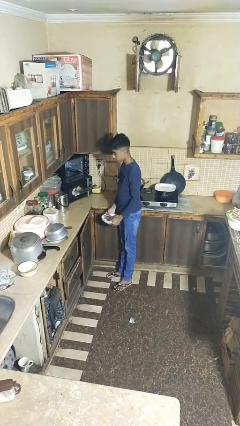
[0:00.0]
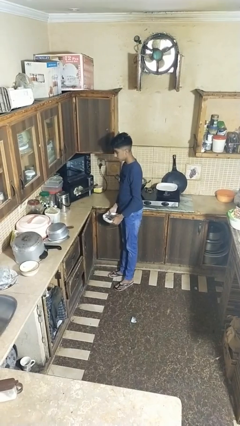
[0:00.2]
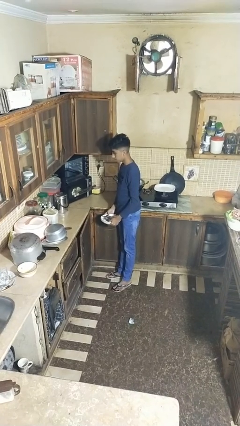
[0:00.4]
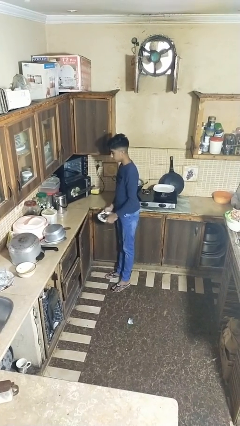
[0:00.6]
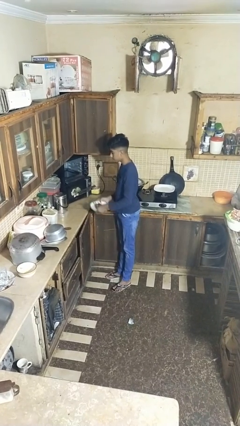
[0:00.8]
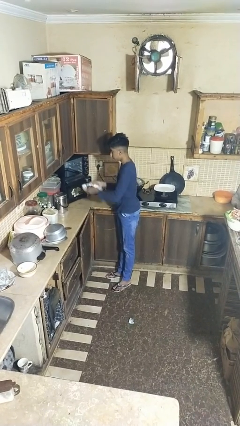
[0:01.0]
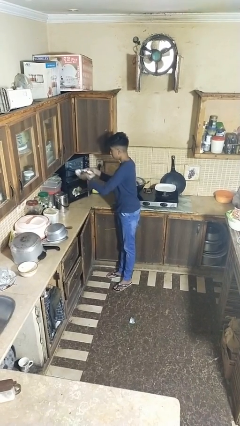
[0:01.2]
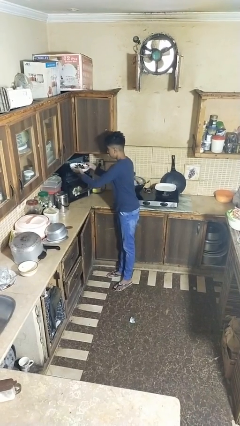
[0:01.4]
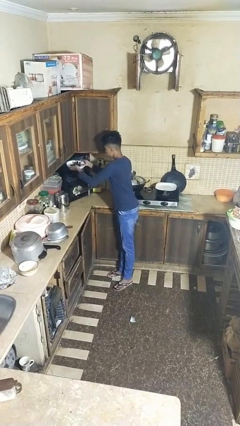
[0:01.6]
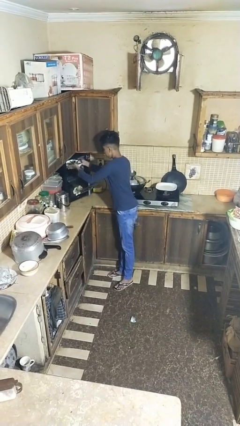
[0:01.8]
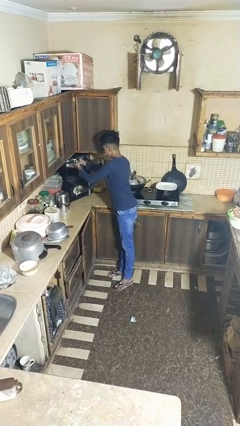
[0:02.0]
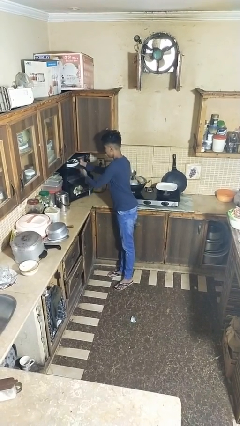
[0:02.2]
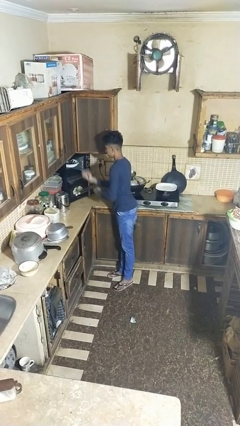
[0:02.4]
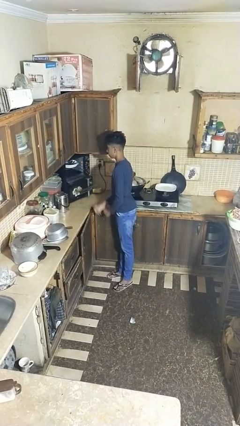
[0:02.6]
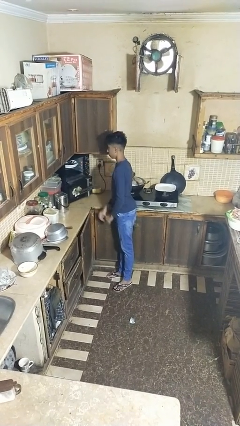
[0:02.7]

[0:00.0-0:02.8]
person loads dishwasher

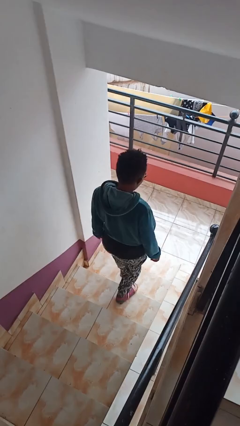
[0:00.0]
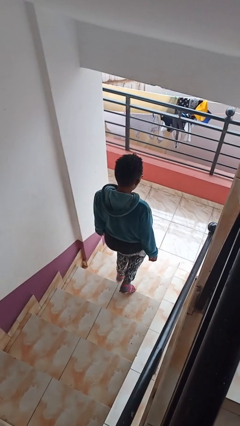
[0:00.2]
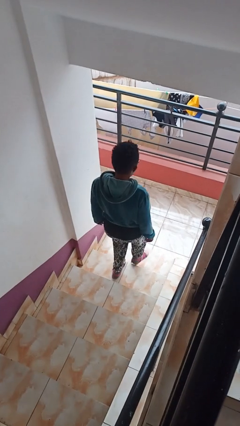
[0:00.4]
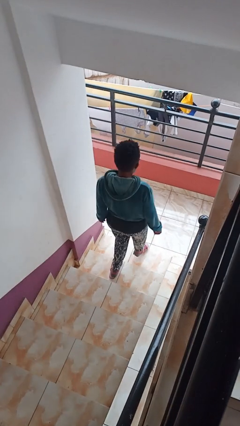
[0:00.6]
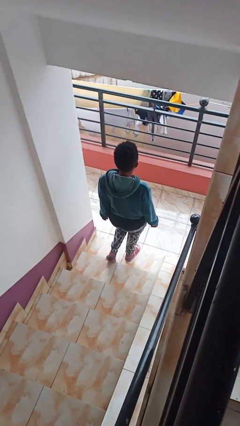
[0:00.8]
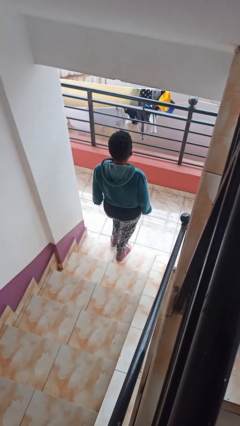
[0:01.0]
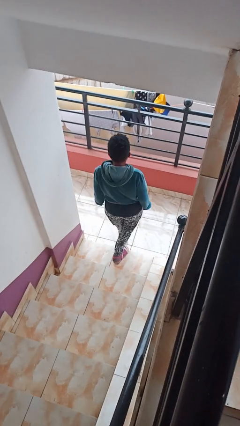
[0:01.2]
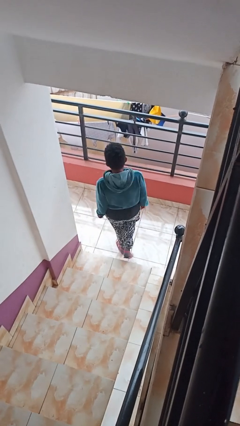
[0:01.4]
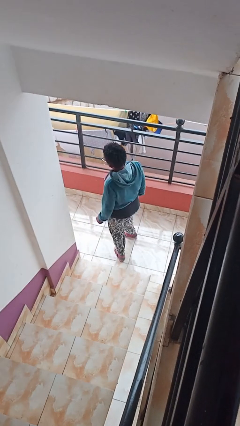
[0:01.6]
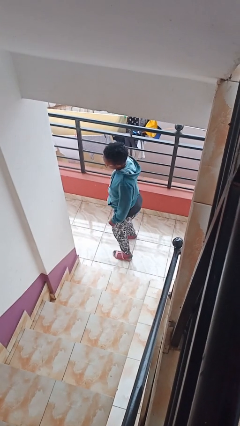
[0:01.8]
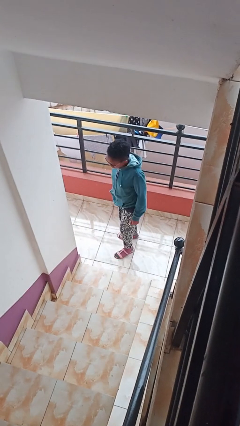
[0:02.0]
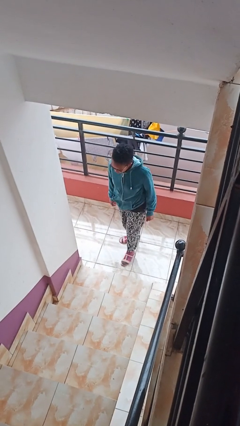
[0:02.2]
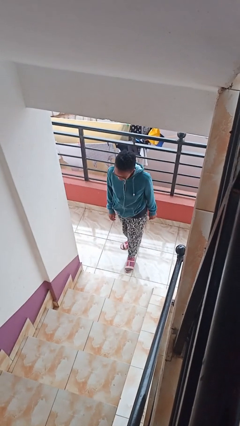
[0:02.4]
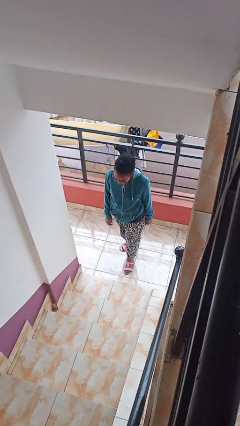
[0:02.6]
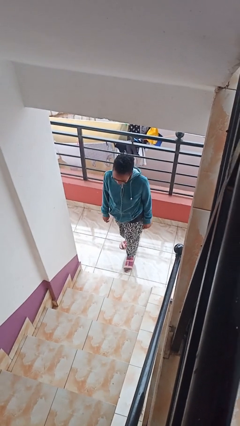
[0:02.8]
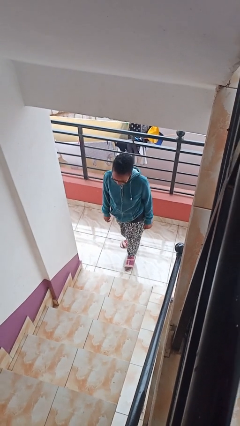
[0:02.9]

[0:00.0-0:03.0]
person climbs down stairs

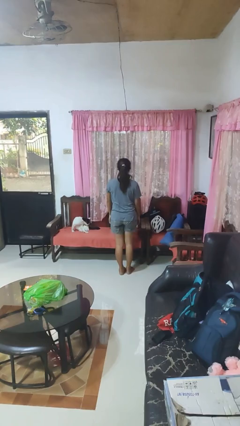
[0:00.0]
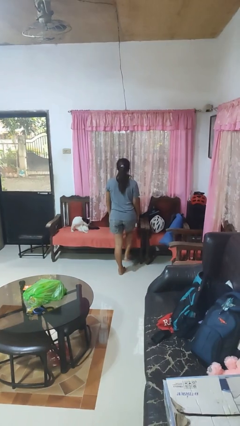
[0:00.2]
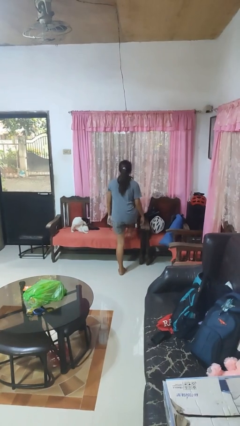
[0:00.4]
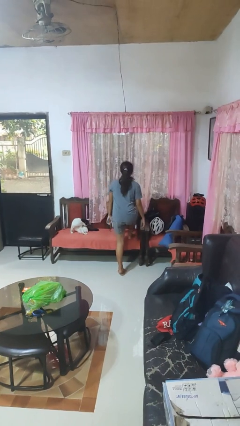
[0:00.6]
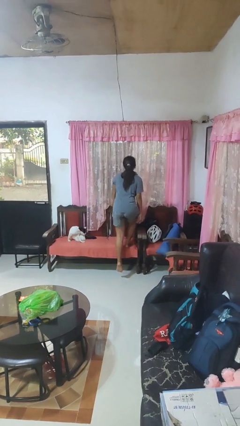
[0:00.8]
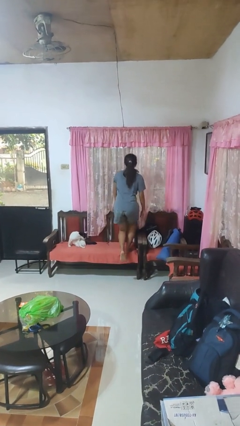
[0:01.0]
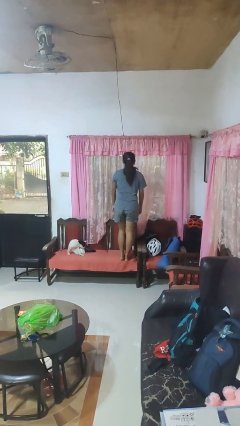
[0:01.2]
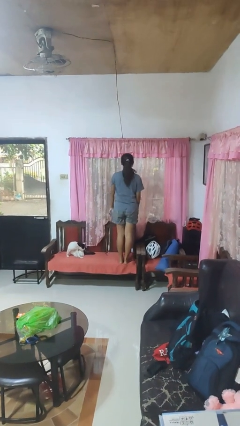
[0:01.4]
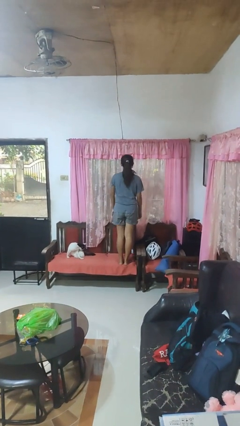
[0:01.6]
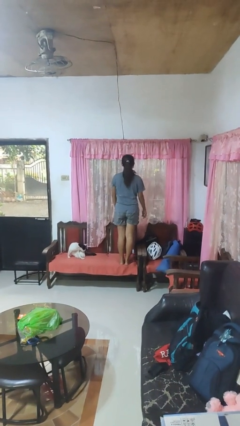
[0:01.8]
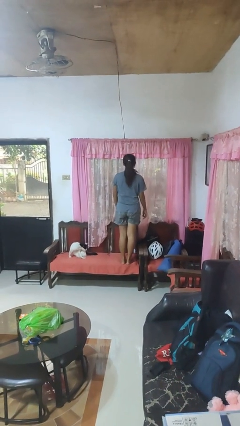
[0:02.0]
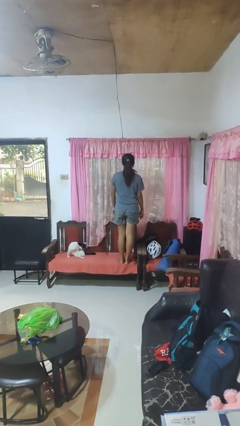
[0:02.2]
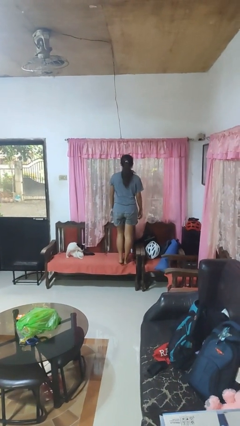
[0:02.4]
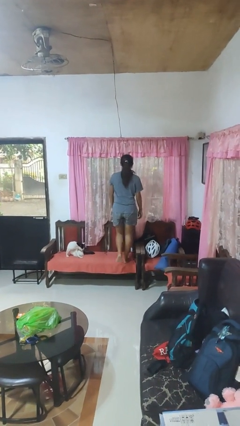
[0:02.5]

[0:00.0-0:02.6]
person climbs on chair

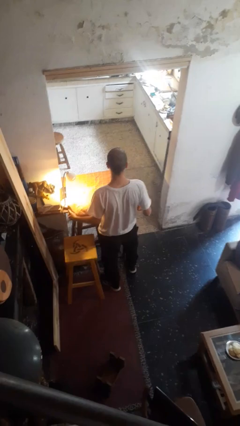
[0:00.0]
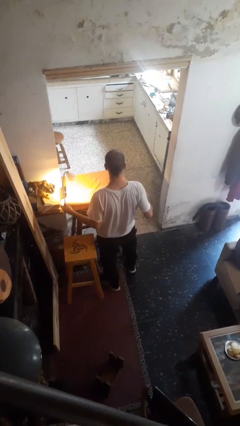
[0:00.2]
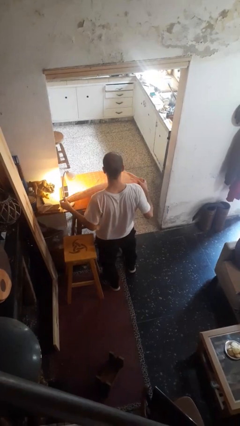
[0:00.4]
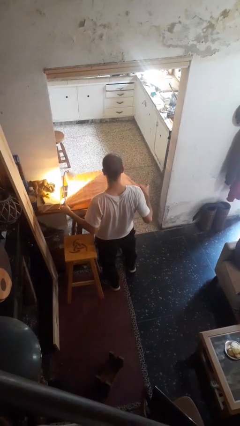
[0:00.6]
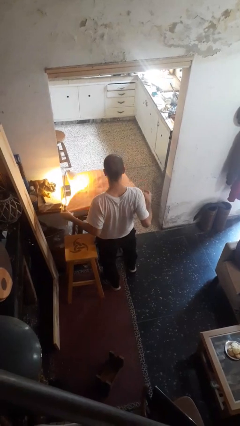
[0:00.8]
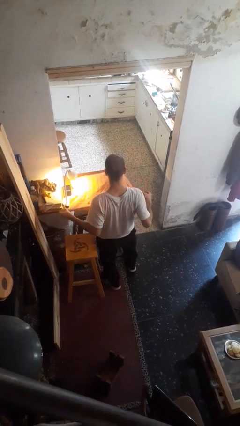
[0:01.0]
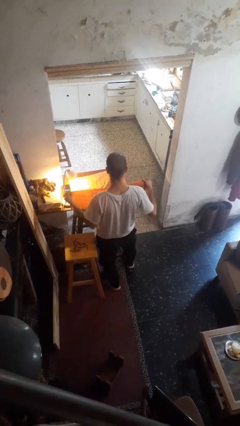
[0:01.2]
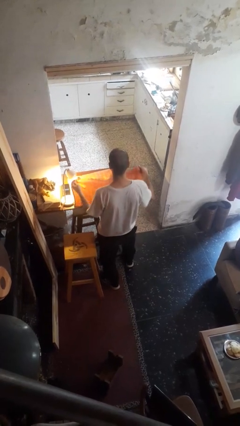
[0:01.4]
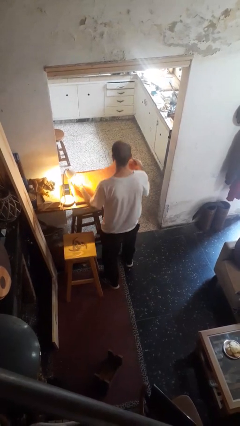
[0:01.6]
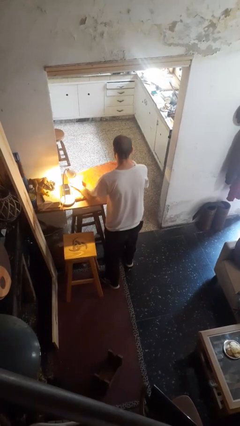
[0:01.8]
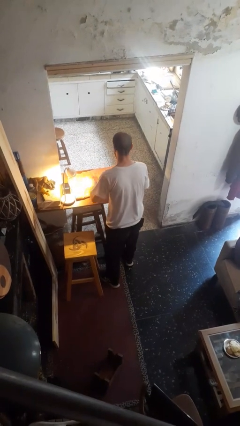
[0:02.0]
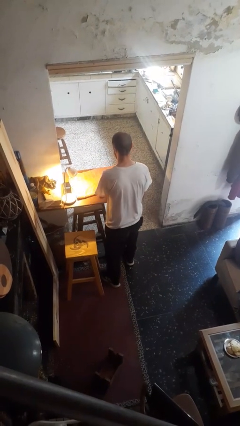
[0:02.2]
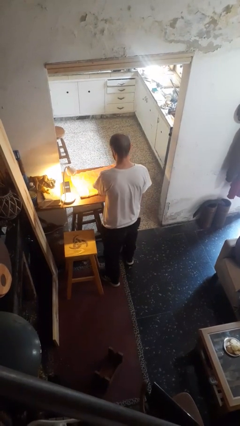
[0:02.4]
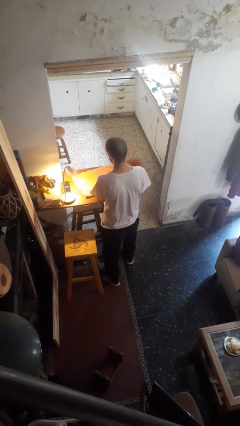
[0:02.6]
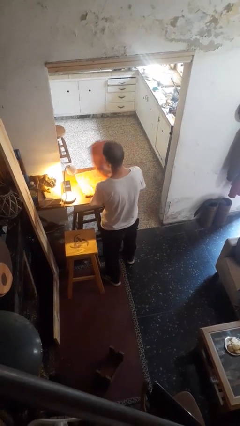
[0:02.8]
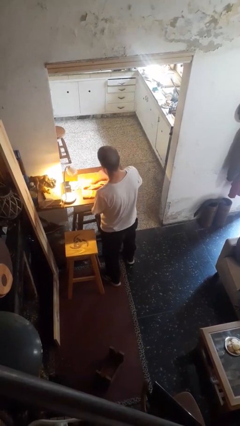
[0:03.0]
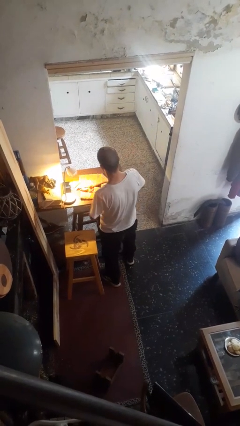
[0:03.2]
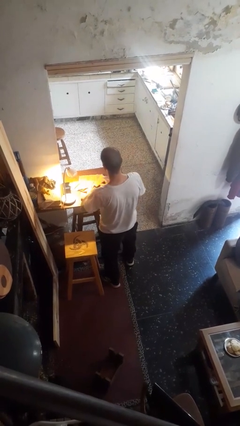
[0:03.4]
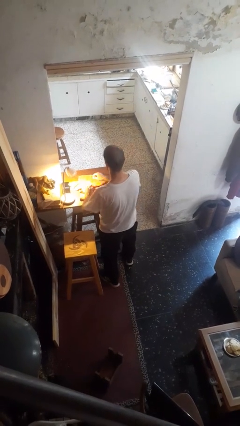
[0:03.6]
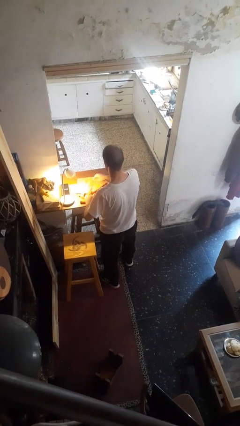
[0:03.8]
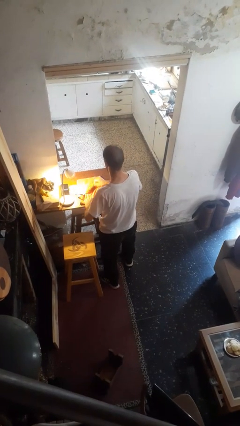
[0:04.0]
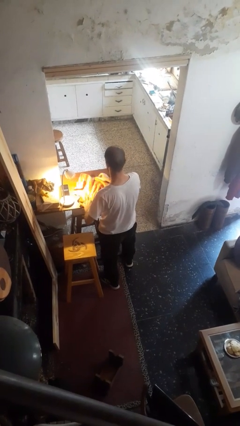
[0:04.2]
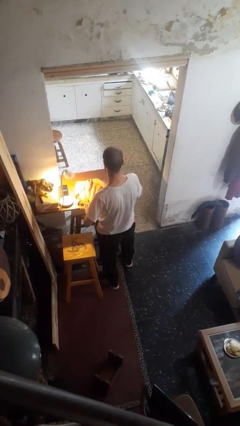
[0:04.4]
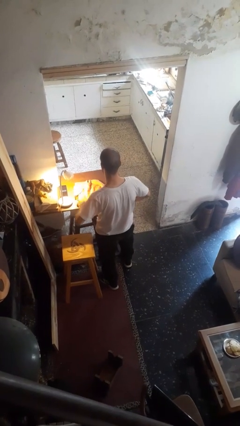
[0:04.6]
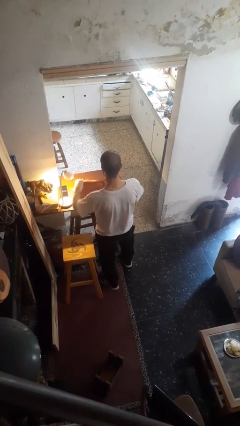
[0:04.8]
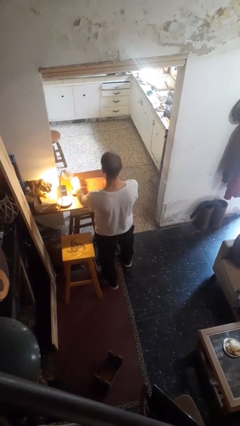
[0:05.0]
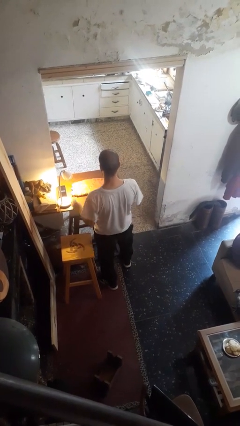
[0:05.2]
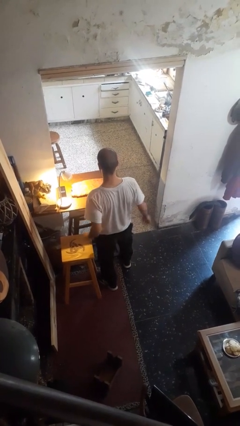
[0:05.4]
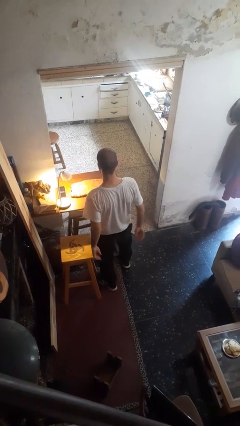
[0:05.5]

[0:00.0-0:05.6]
person folds tablecloth

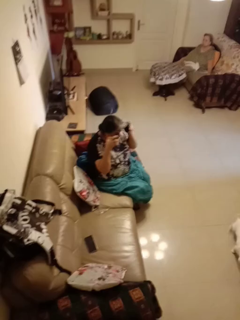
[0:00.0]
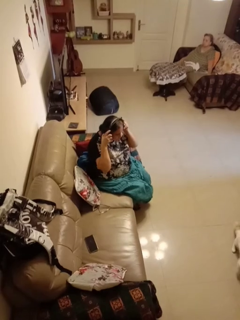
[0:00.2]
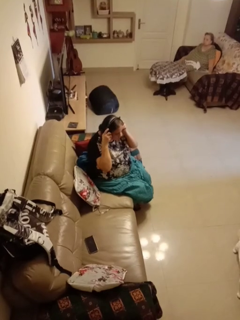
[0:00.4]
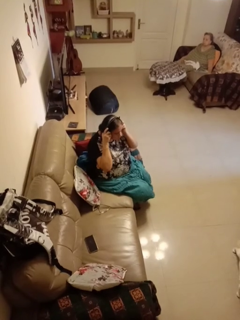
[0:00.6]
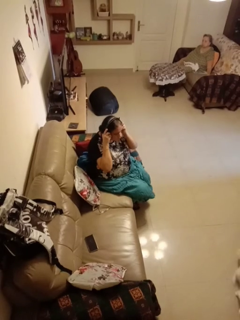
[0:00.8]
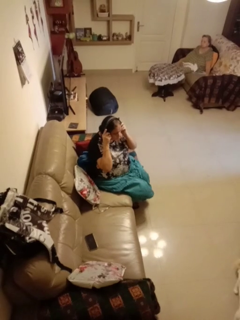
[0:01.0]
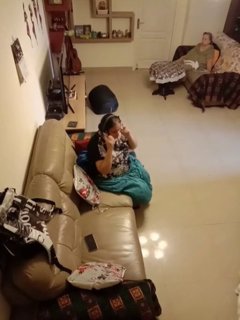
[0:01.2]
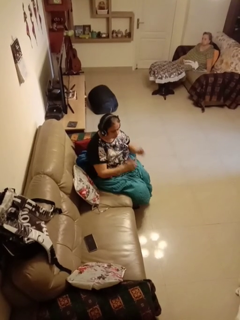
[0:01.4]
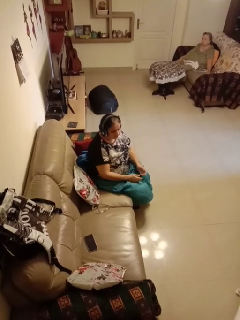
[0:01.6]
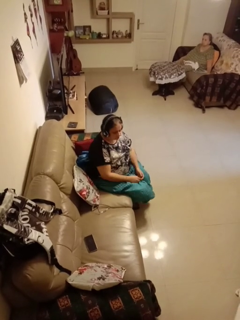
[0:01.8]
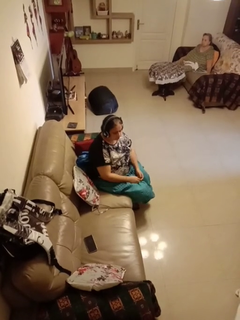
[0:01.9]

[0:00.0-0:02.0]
person puts on headphones

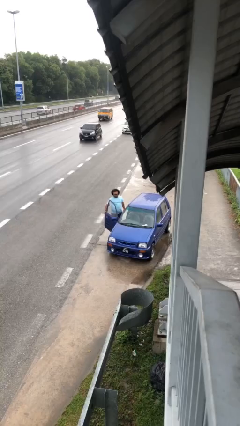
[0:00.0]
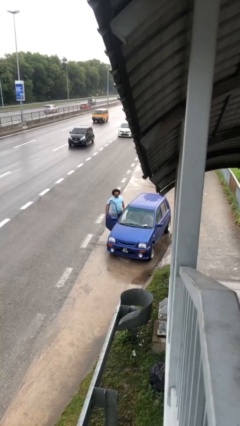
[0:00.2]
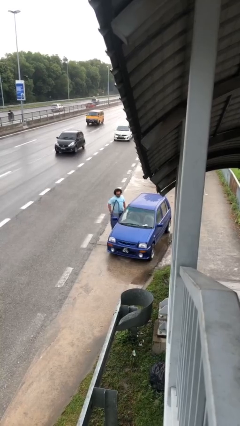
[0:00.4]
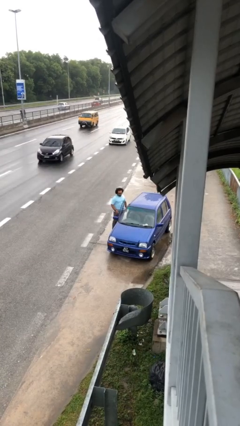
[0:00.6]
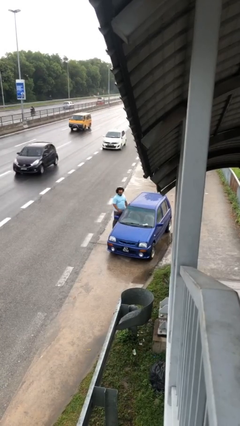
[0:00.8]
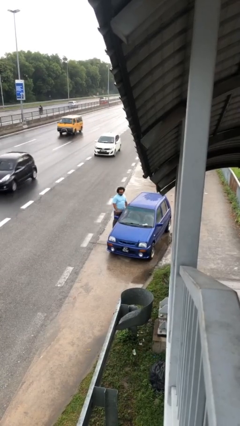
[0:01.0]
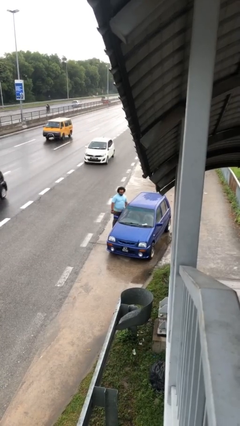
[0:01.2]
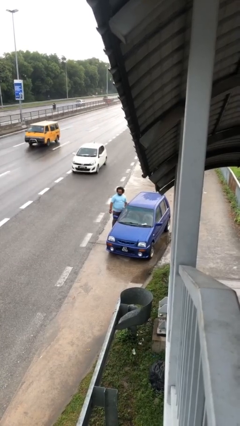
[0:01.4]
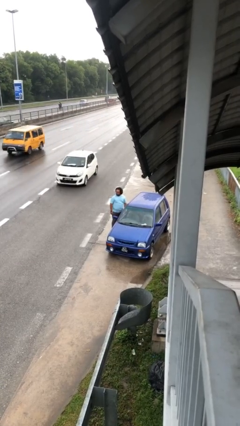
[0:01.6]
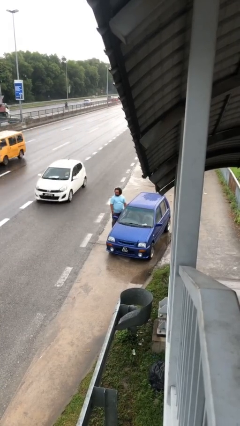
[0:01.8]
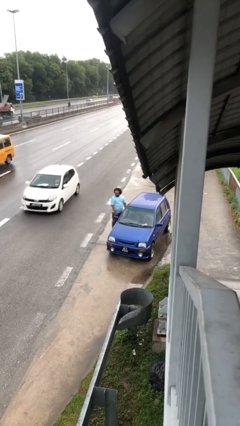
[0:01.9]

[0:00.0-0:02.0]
person closes car door
